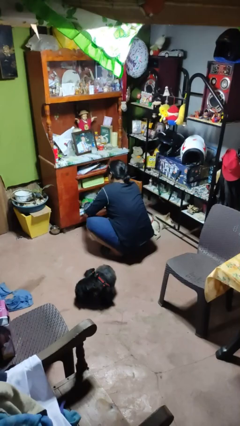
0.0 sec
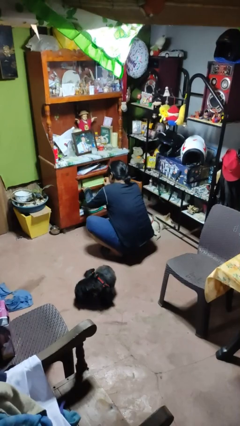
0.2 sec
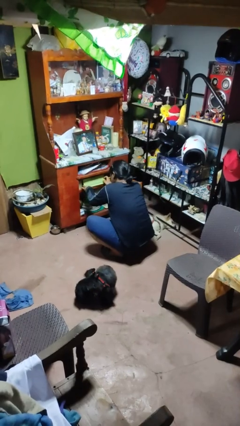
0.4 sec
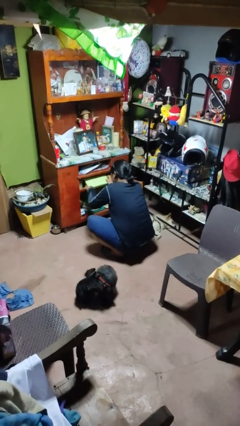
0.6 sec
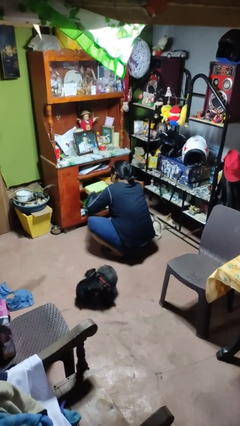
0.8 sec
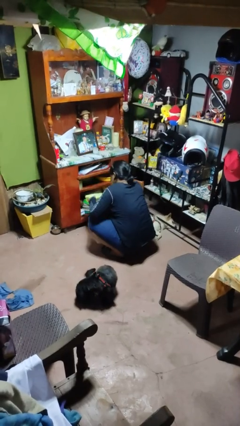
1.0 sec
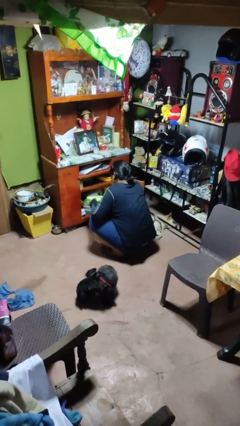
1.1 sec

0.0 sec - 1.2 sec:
person picks up object from cabinet

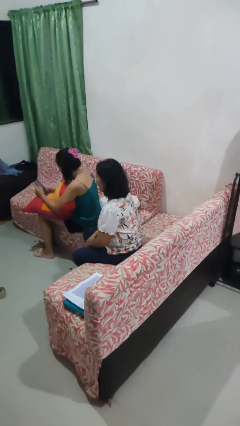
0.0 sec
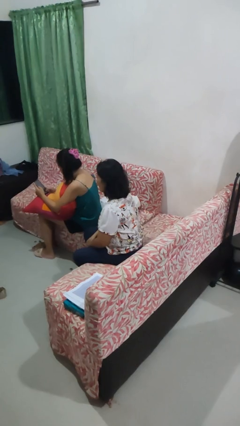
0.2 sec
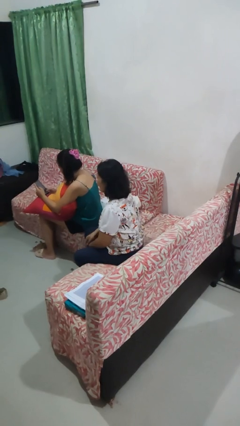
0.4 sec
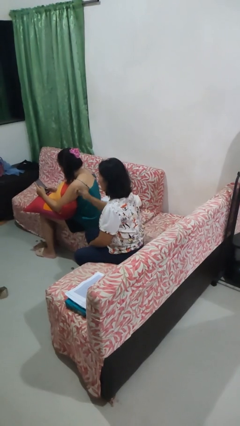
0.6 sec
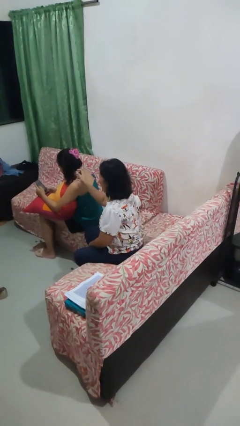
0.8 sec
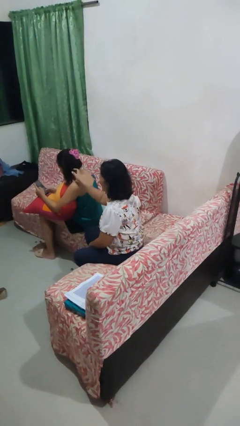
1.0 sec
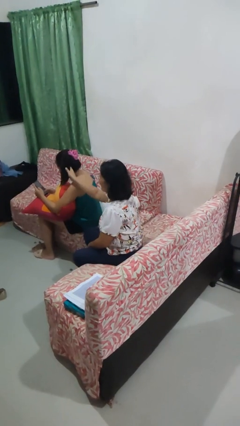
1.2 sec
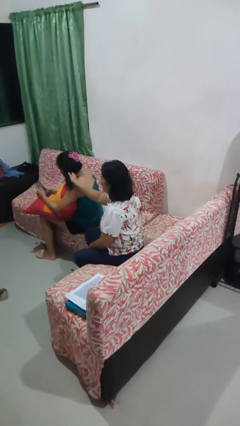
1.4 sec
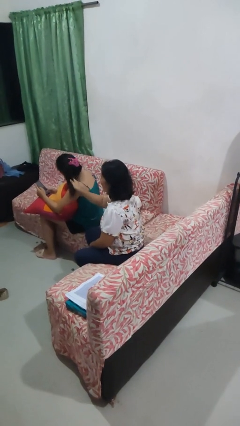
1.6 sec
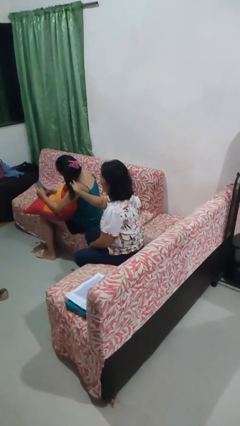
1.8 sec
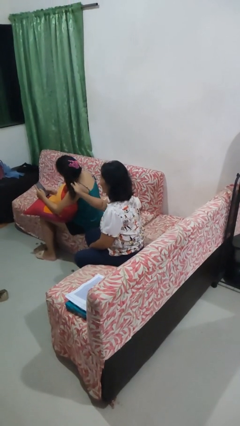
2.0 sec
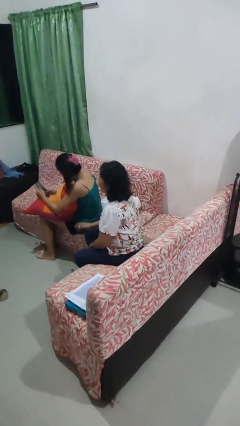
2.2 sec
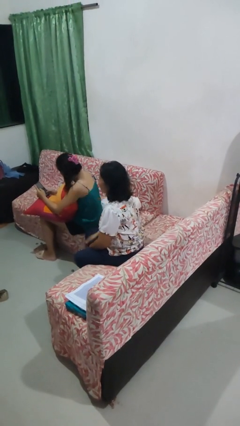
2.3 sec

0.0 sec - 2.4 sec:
person grabs person by hair

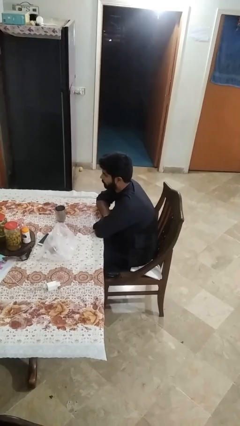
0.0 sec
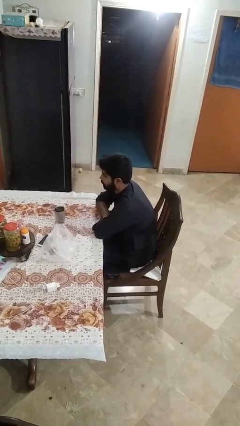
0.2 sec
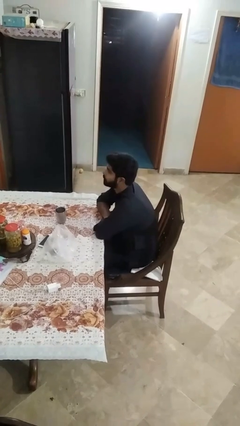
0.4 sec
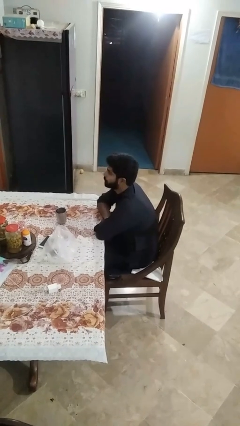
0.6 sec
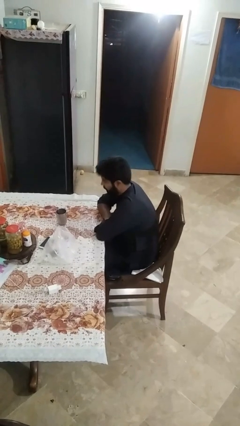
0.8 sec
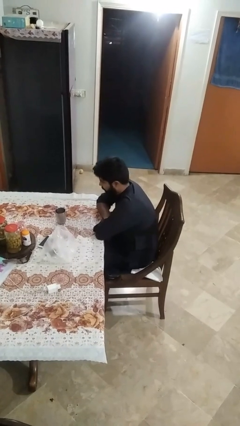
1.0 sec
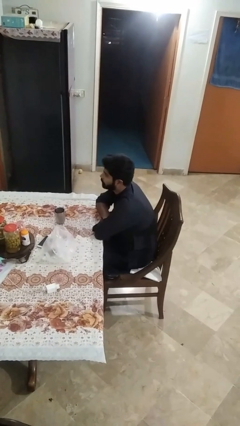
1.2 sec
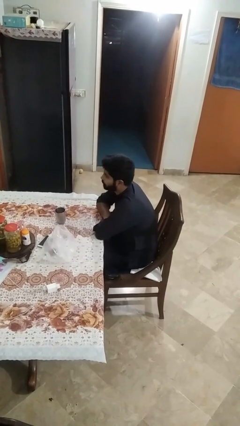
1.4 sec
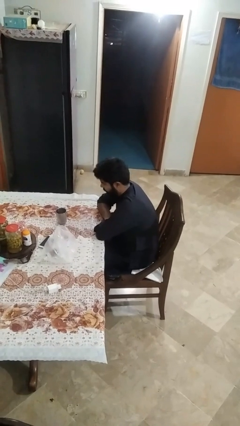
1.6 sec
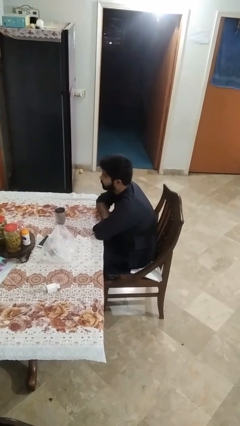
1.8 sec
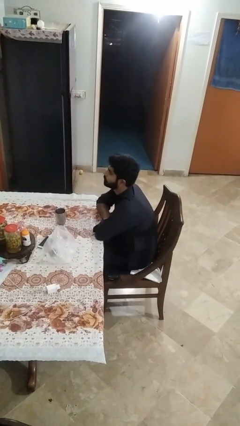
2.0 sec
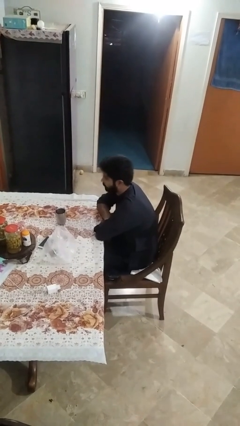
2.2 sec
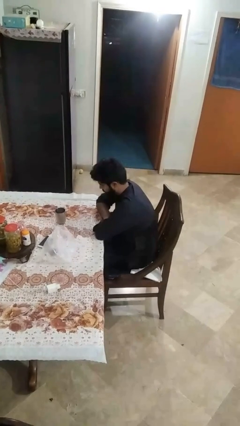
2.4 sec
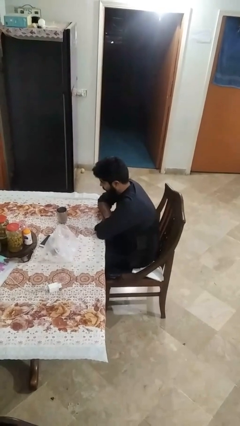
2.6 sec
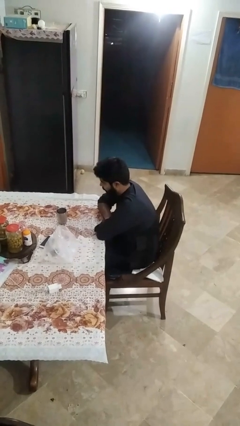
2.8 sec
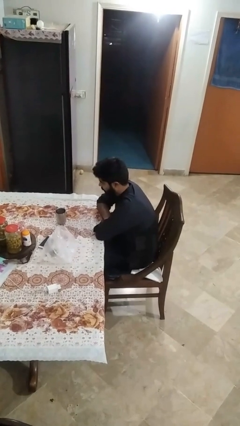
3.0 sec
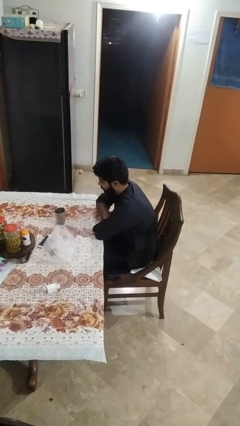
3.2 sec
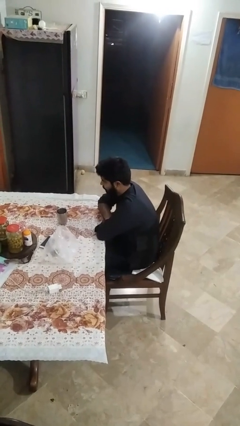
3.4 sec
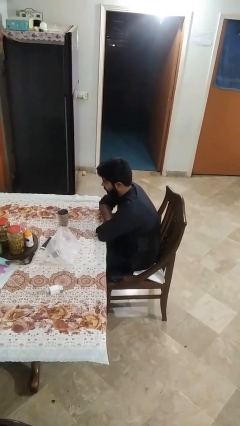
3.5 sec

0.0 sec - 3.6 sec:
person nods head

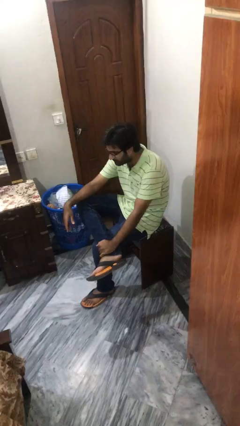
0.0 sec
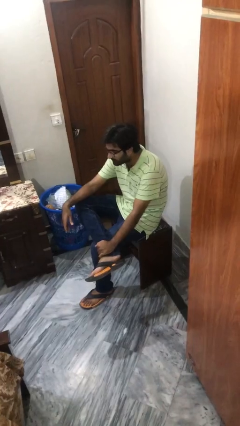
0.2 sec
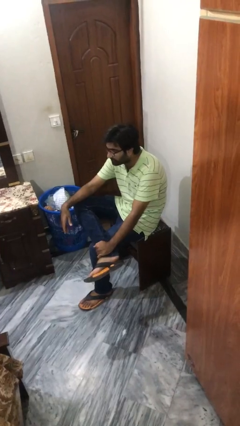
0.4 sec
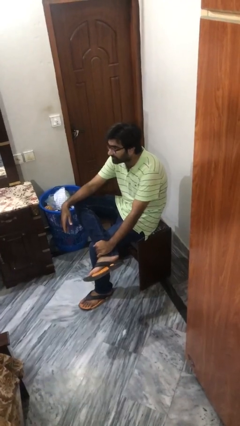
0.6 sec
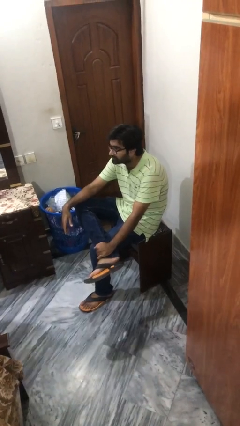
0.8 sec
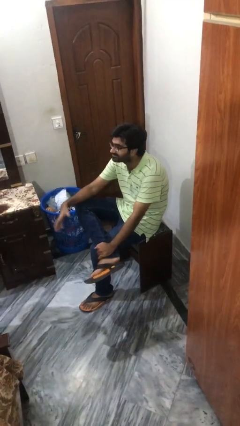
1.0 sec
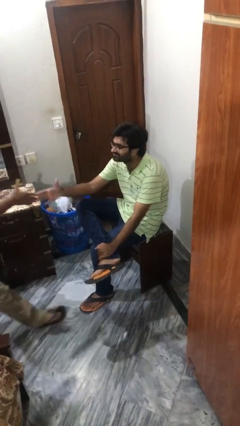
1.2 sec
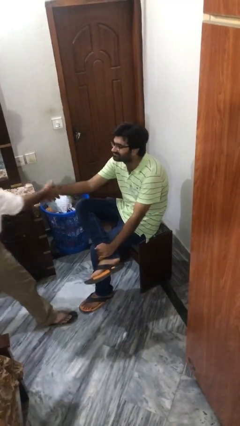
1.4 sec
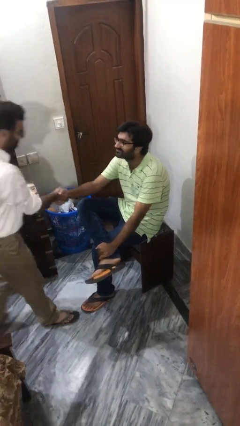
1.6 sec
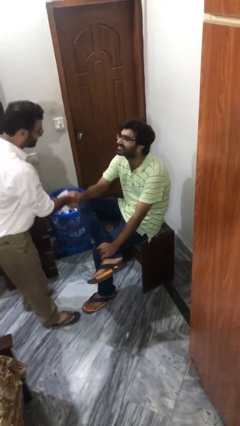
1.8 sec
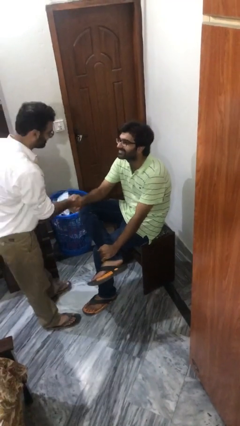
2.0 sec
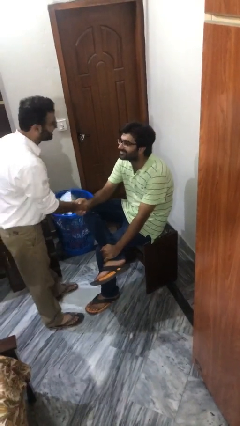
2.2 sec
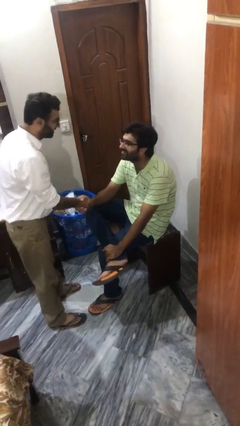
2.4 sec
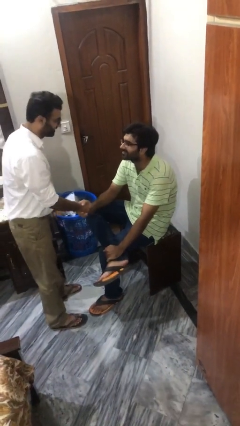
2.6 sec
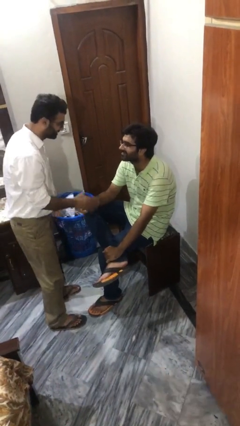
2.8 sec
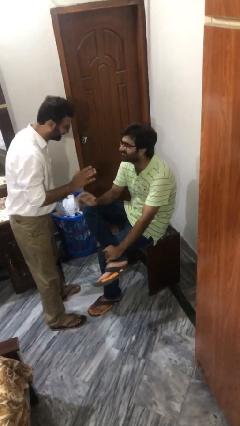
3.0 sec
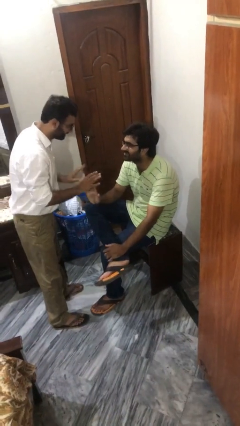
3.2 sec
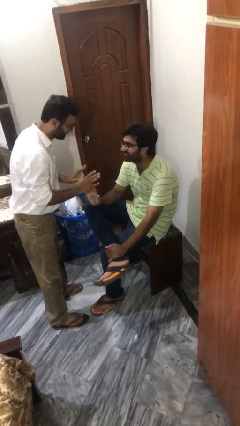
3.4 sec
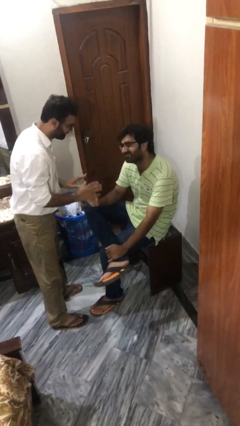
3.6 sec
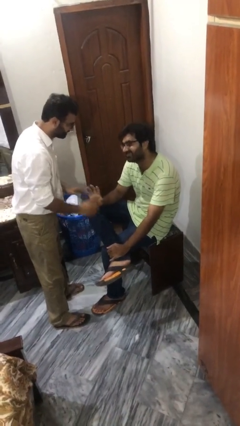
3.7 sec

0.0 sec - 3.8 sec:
person shakes hand

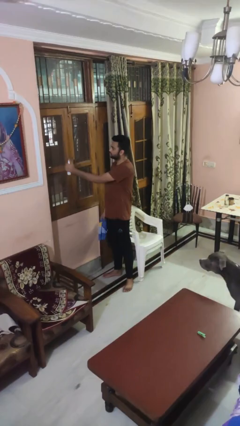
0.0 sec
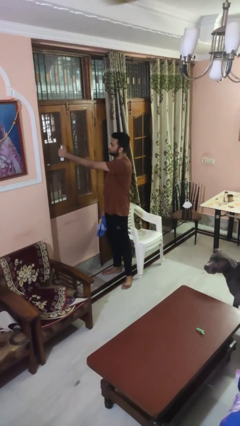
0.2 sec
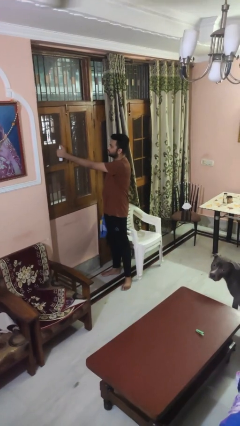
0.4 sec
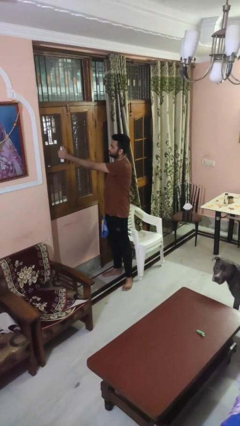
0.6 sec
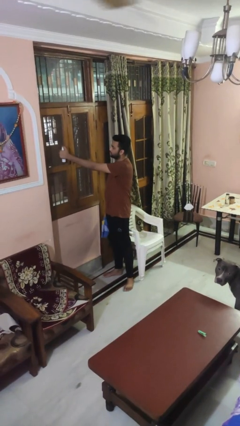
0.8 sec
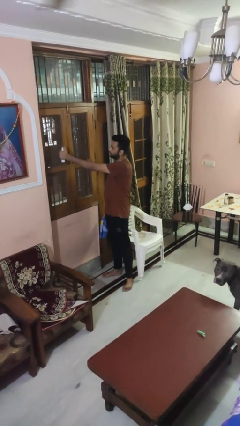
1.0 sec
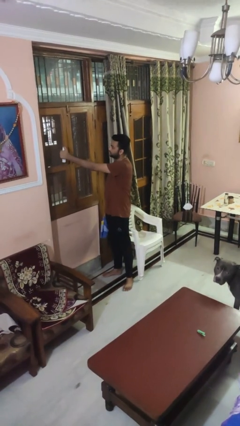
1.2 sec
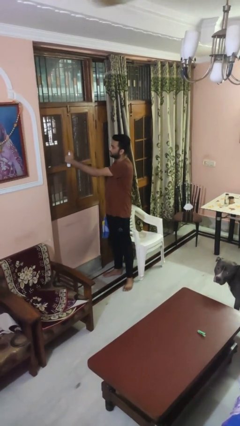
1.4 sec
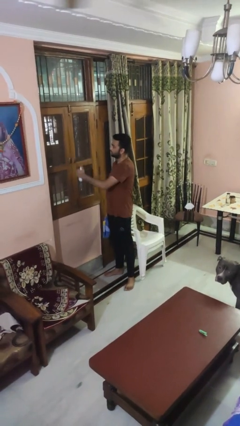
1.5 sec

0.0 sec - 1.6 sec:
person sprays from bottle

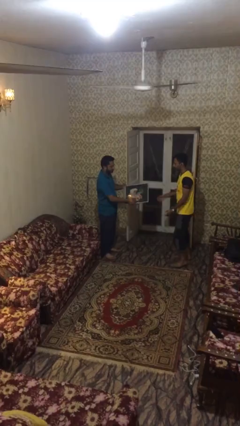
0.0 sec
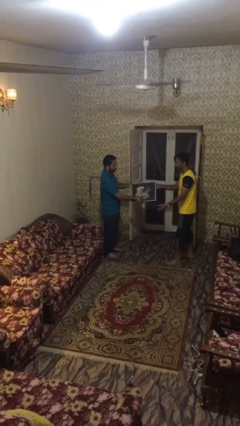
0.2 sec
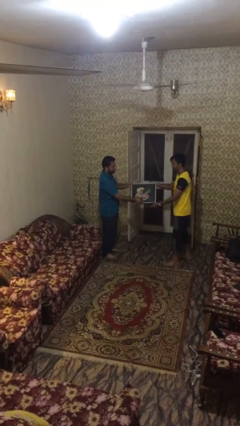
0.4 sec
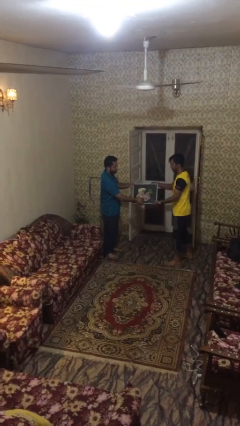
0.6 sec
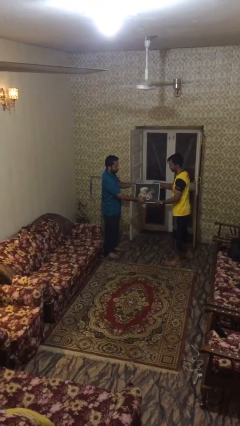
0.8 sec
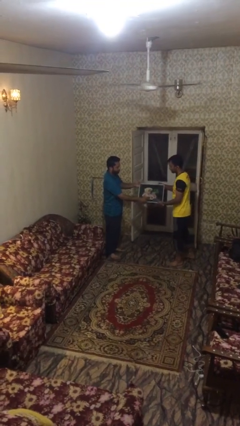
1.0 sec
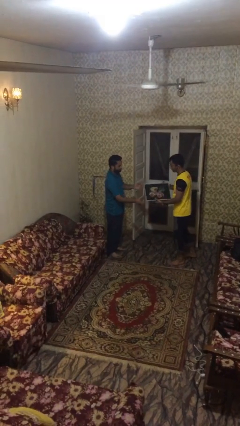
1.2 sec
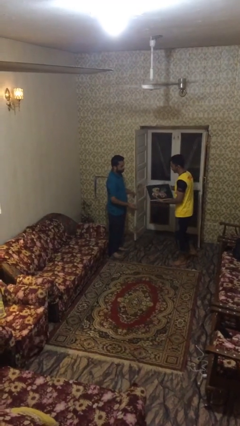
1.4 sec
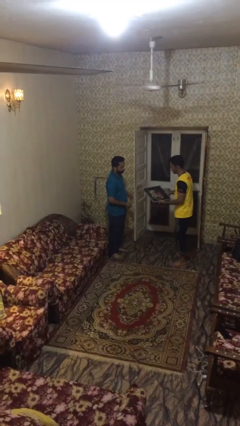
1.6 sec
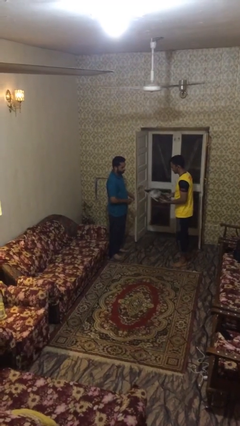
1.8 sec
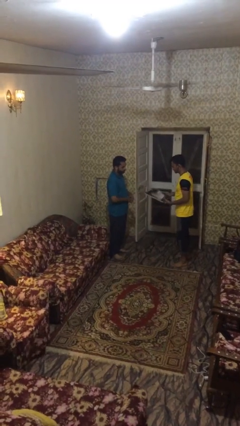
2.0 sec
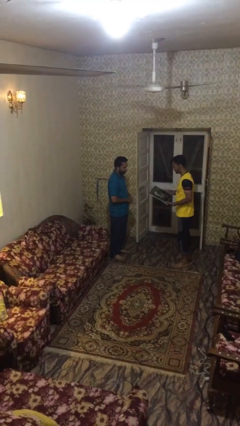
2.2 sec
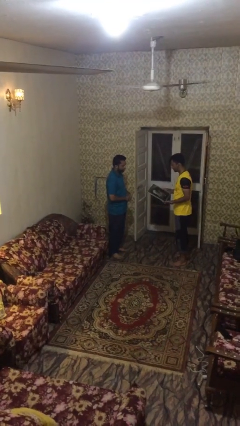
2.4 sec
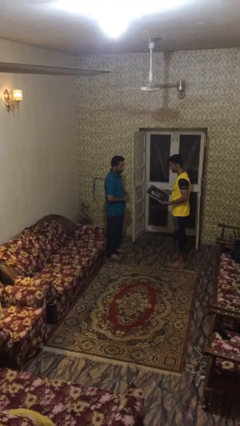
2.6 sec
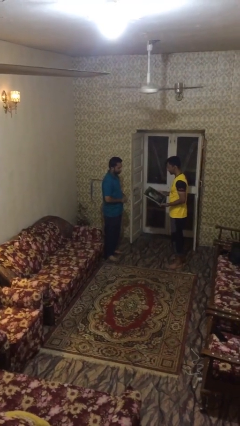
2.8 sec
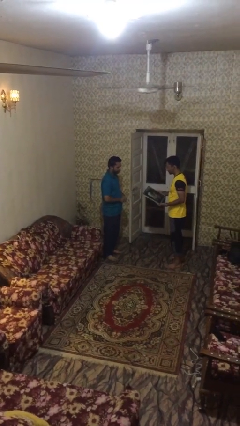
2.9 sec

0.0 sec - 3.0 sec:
person transfers object to person

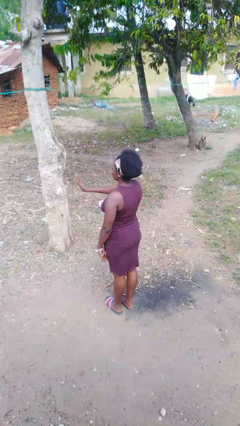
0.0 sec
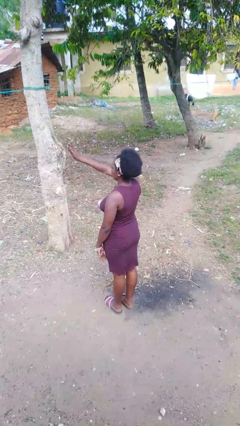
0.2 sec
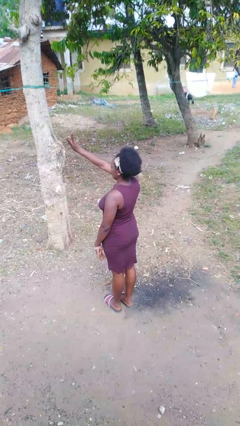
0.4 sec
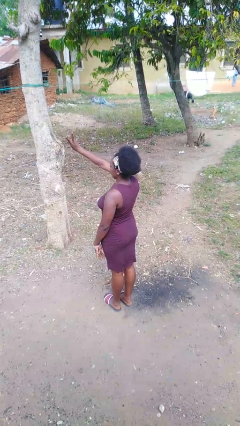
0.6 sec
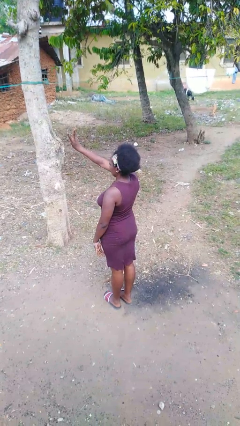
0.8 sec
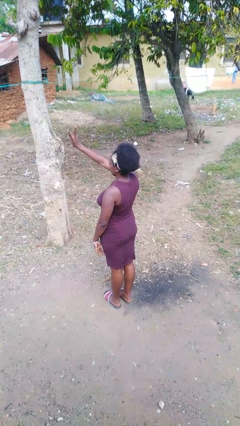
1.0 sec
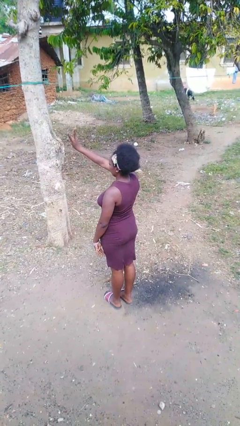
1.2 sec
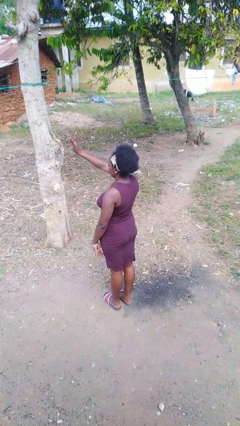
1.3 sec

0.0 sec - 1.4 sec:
person gestures number four
